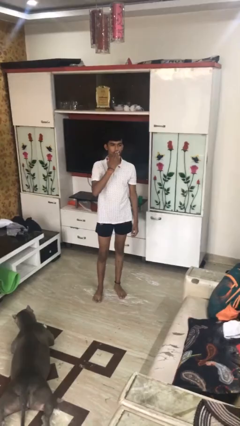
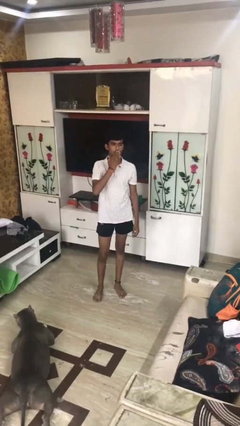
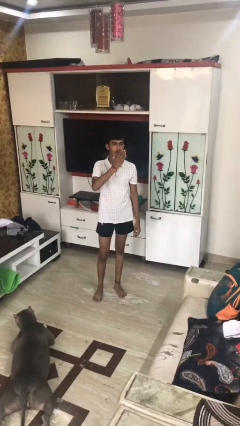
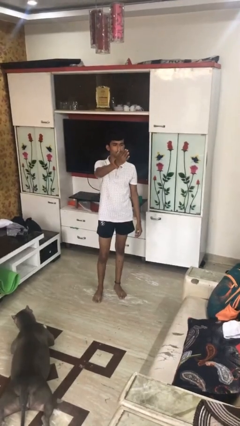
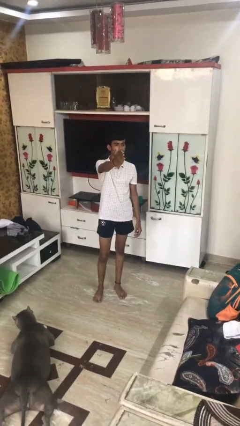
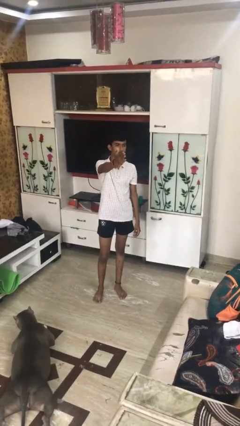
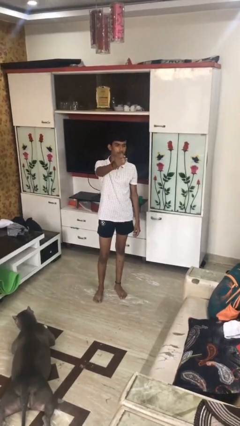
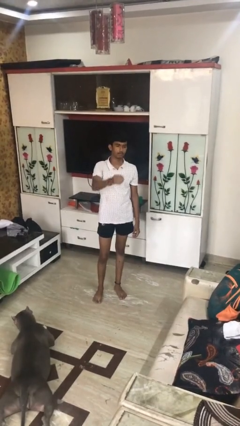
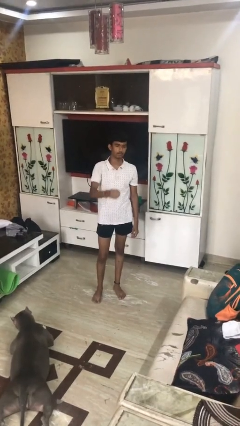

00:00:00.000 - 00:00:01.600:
person gestures blow kiss

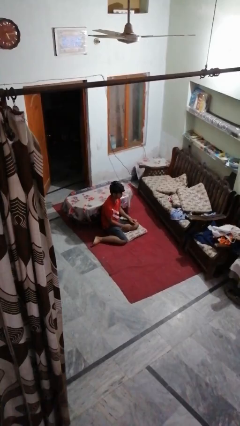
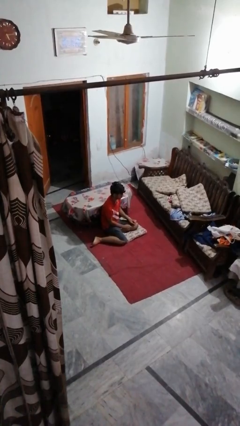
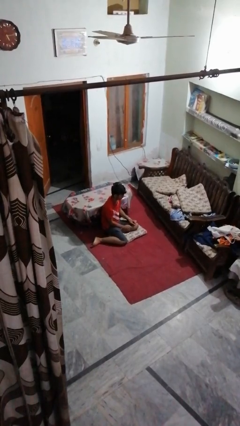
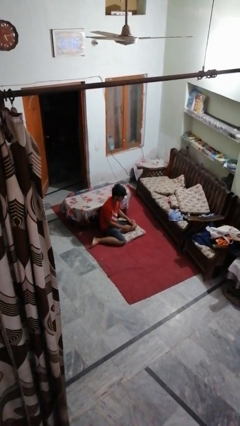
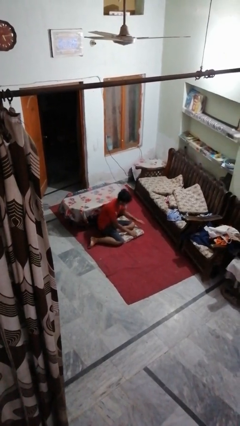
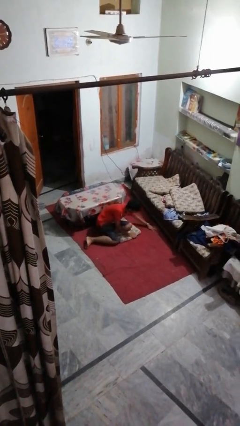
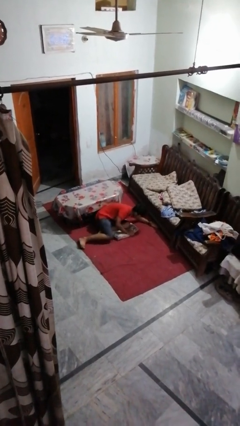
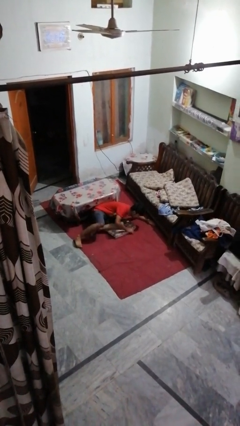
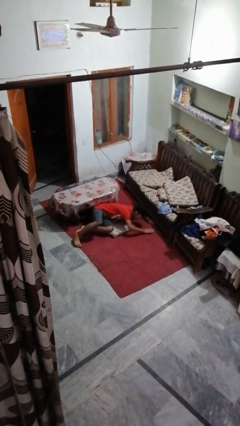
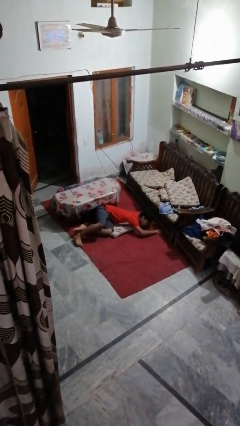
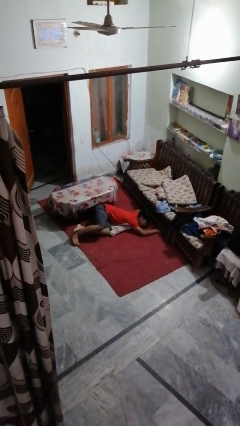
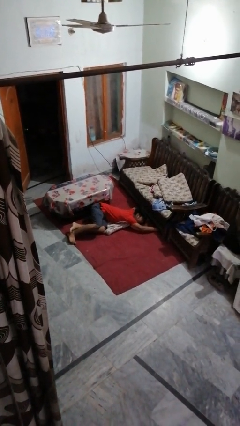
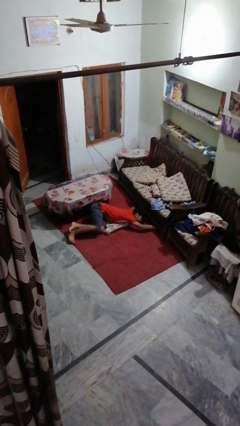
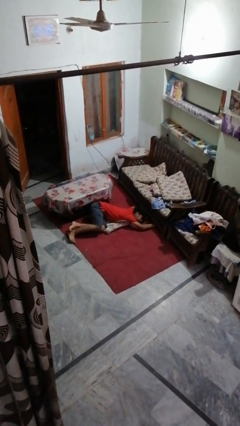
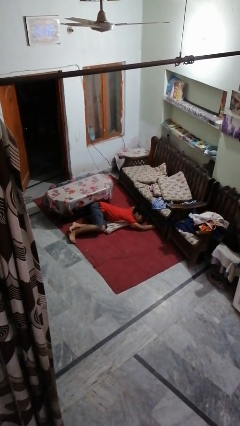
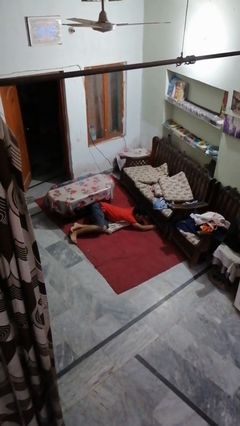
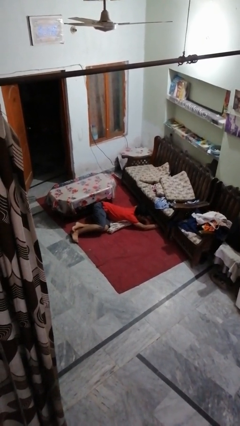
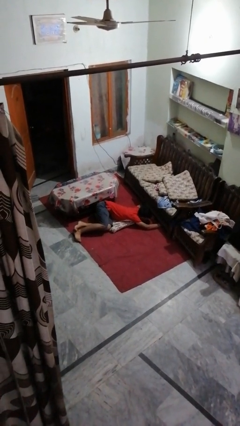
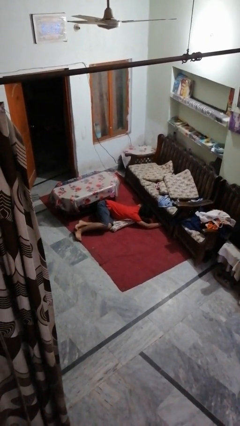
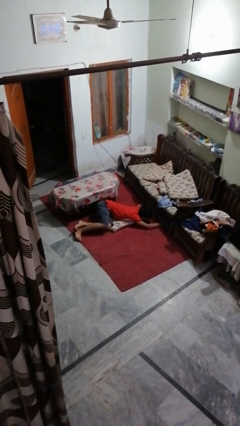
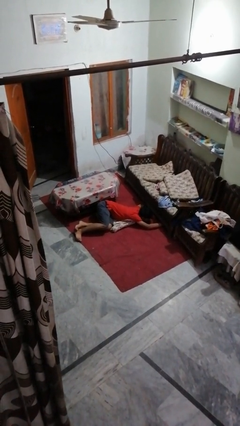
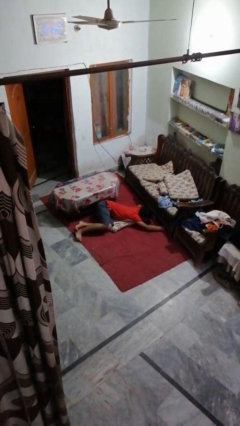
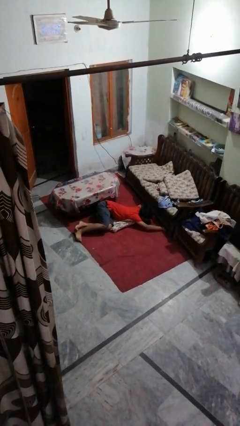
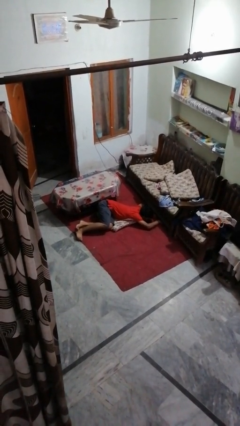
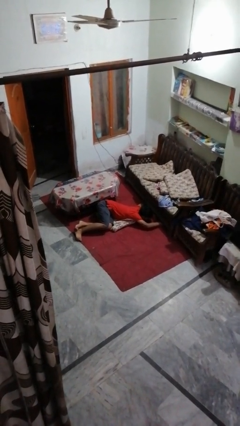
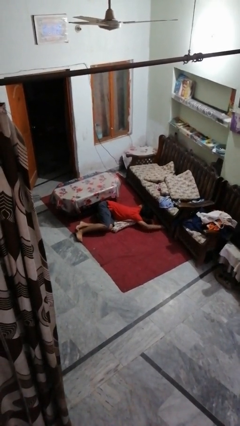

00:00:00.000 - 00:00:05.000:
person searches under couch

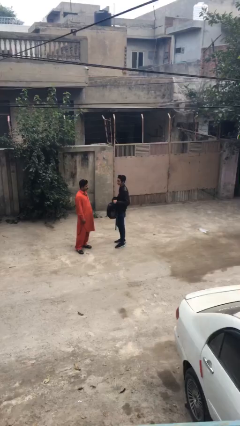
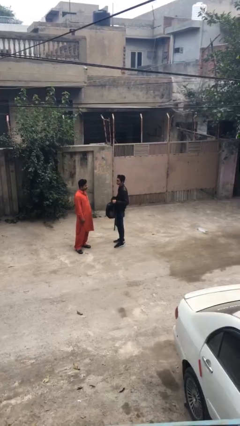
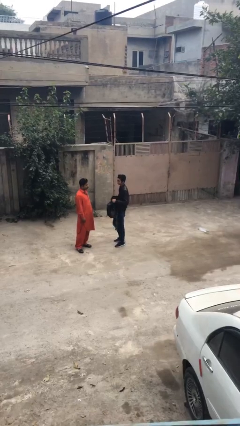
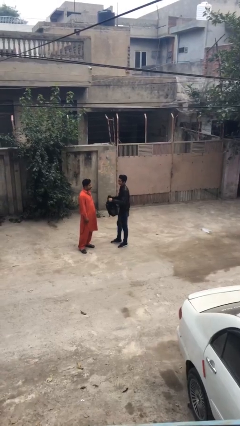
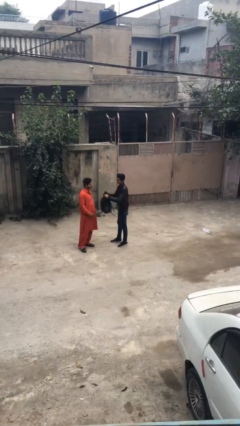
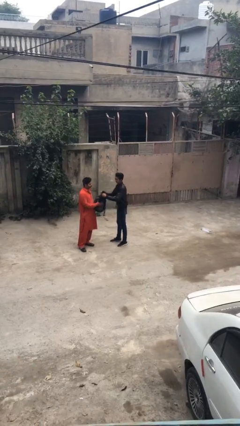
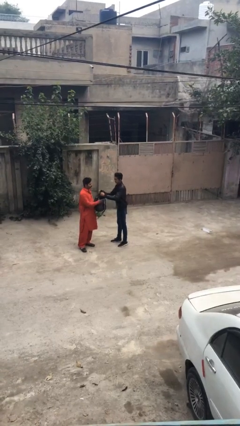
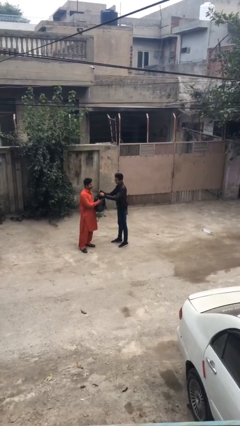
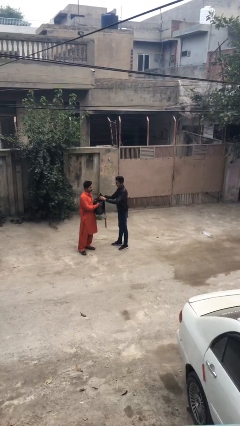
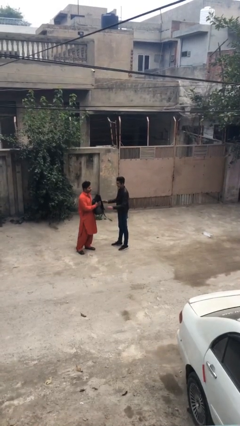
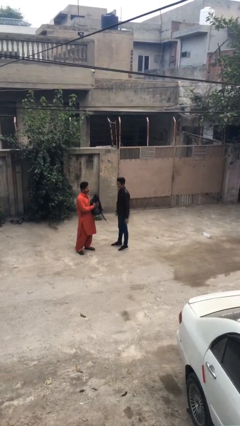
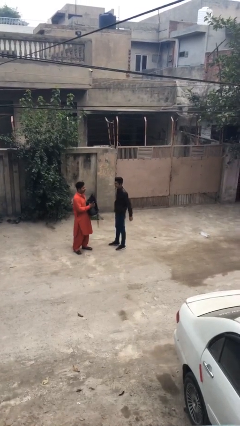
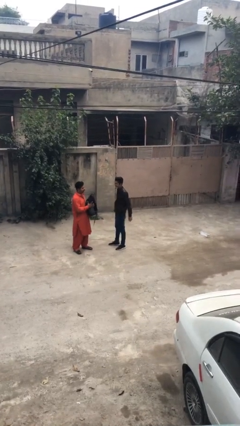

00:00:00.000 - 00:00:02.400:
person transfers object to person

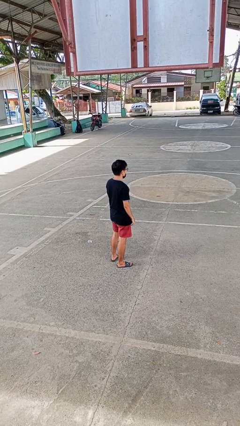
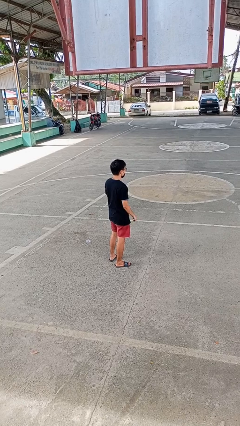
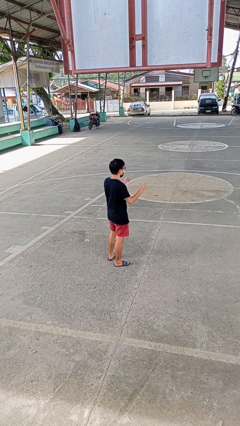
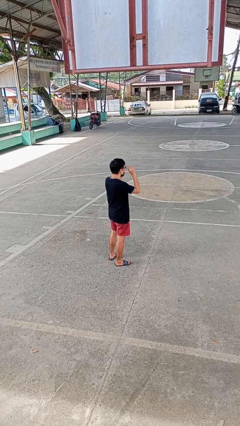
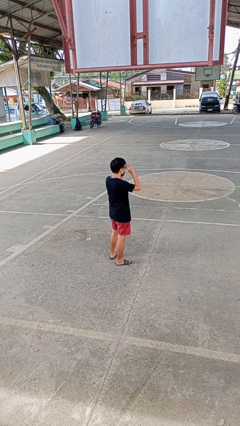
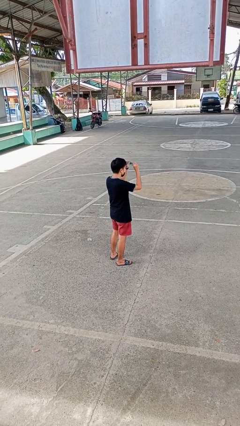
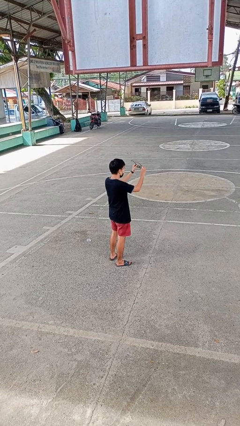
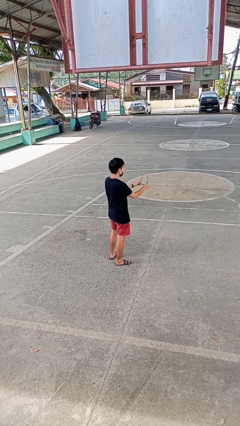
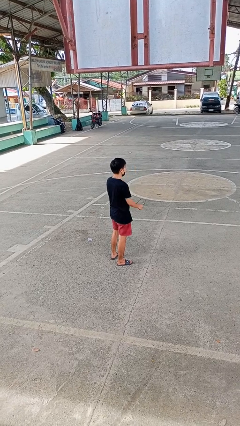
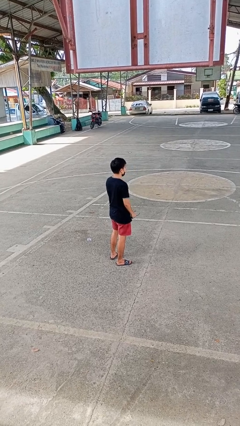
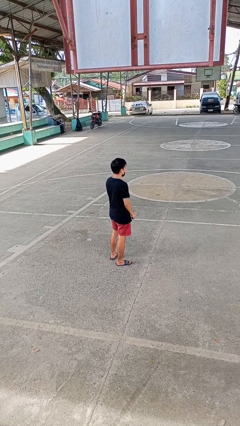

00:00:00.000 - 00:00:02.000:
person takes off glasses

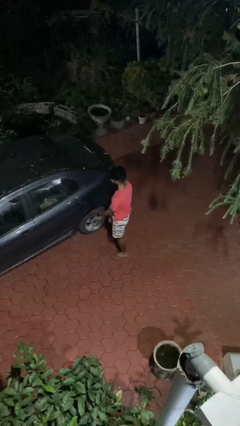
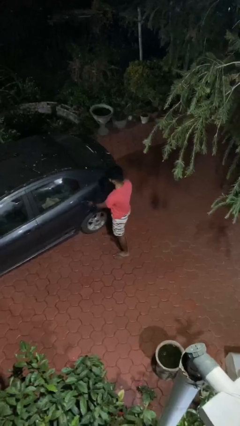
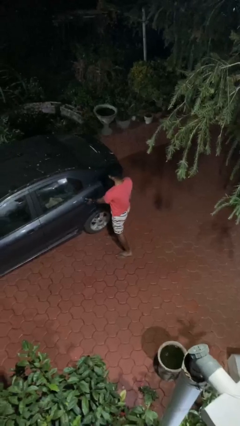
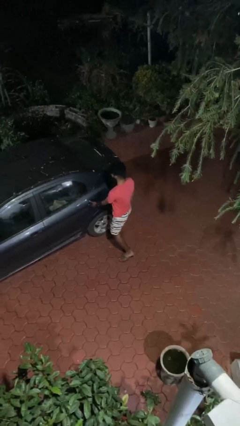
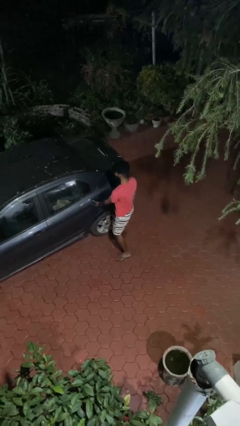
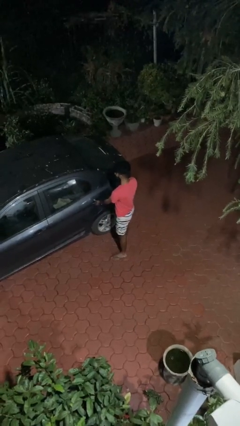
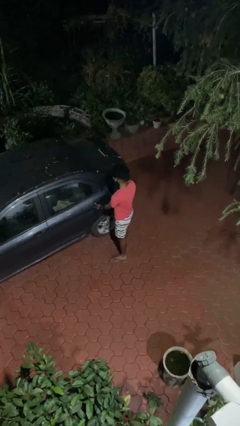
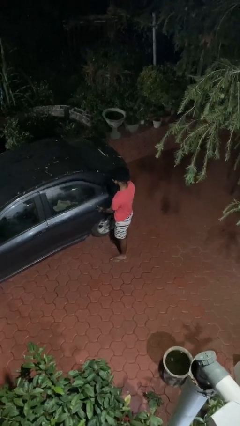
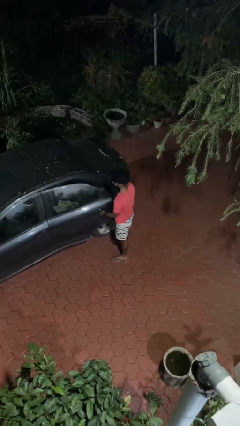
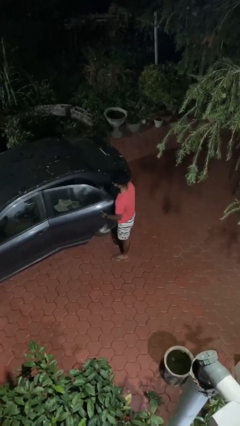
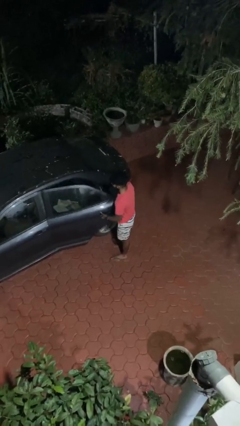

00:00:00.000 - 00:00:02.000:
person opens car door

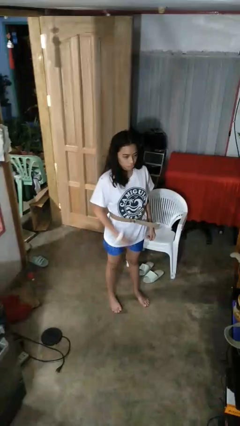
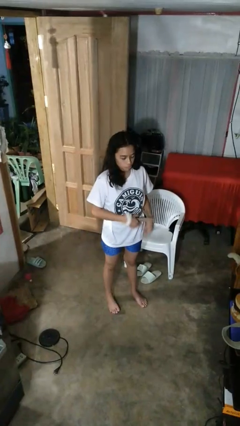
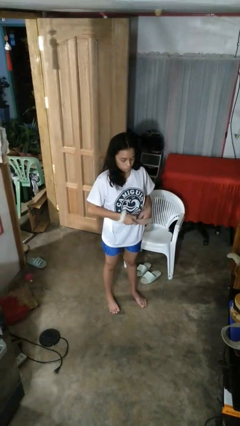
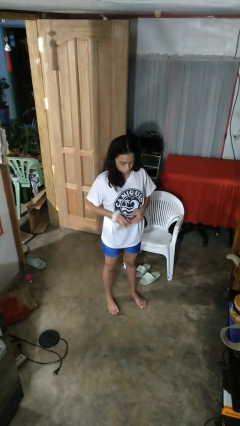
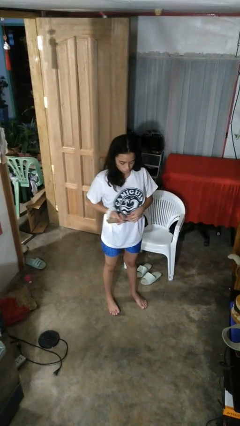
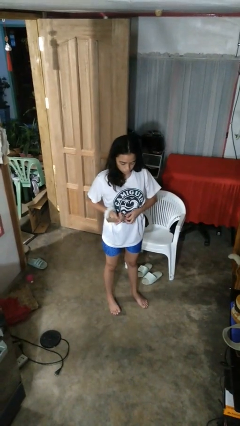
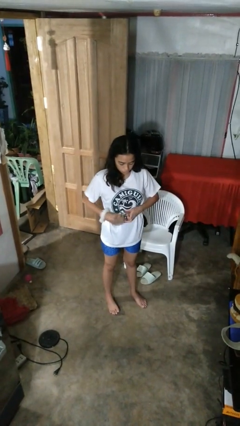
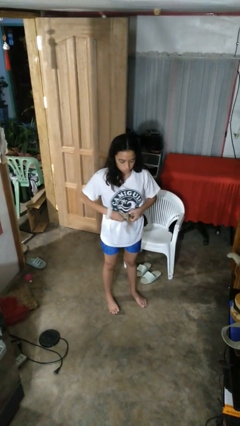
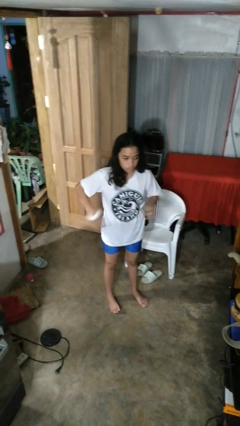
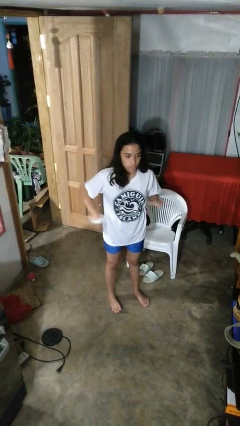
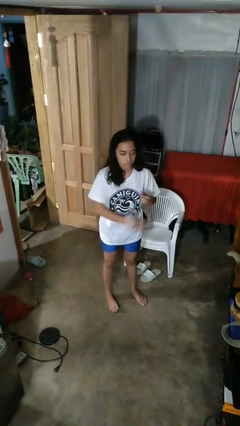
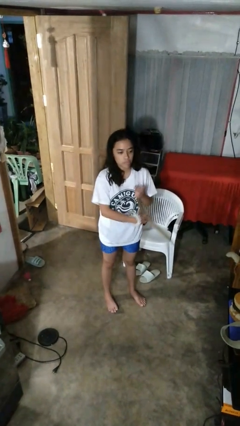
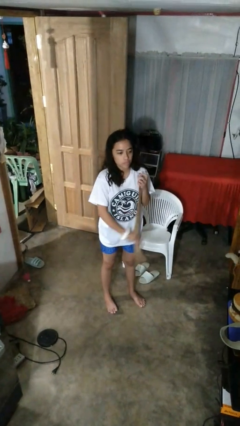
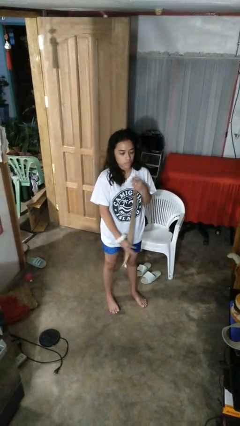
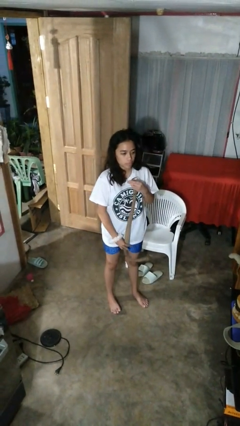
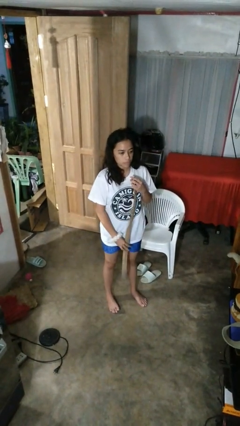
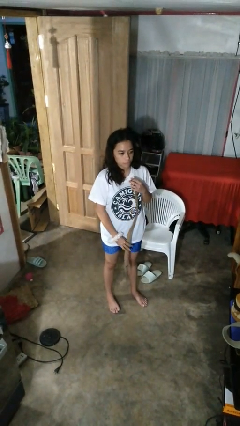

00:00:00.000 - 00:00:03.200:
person takes off belt

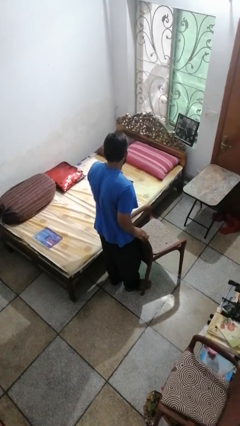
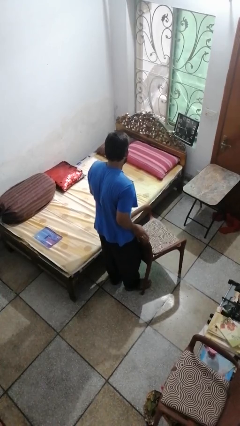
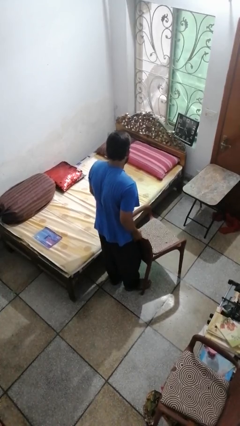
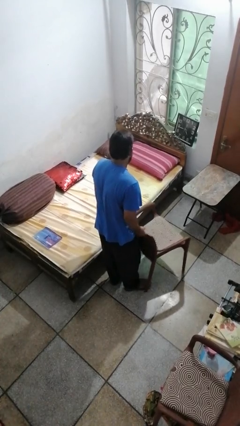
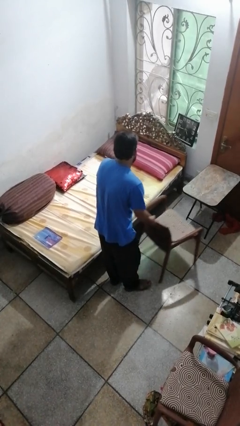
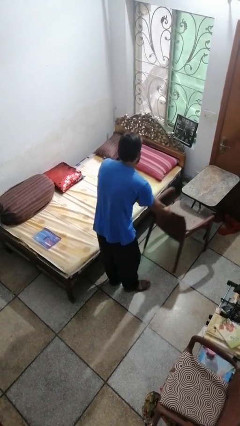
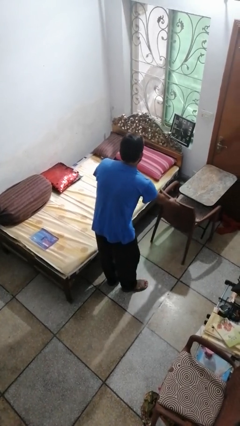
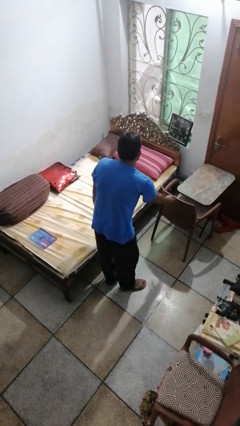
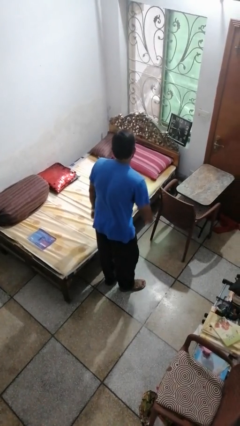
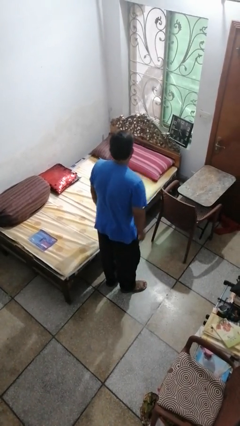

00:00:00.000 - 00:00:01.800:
person pushes in chair
